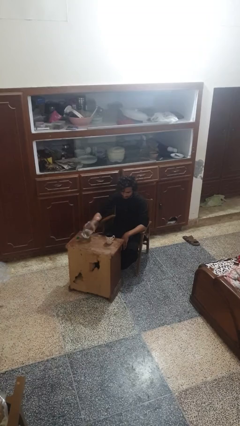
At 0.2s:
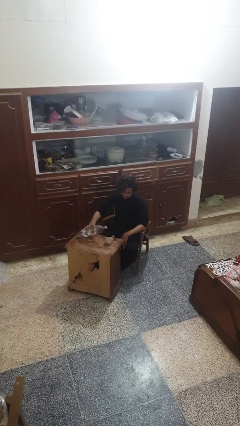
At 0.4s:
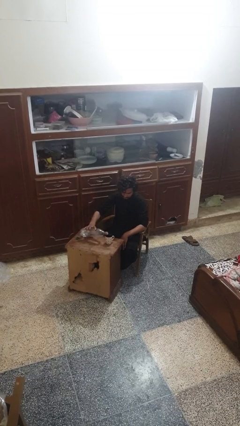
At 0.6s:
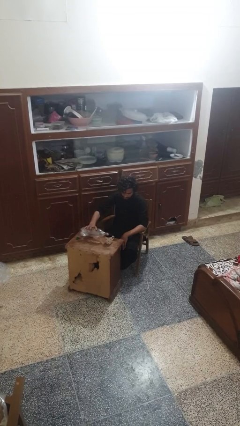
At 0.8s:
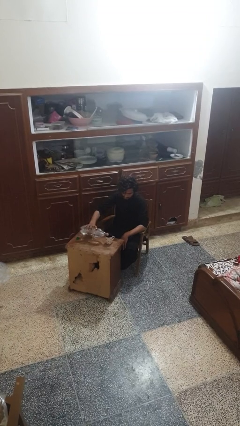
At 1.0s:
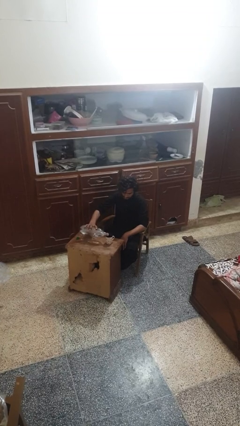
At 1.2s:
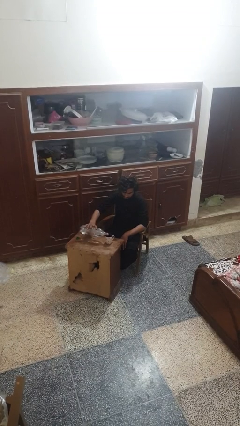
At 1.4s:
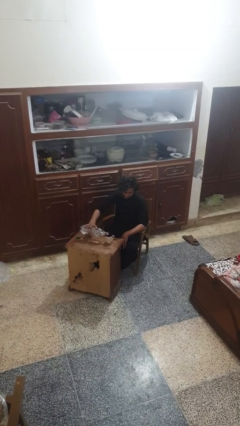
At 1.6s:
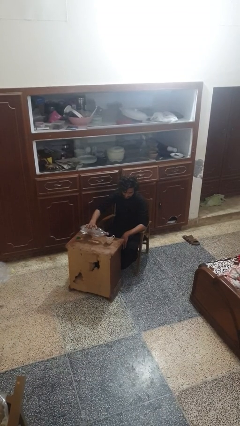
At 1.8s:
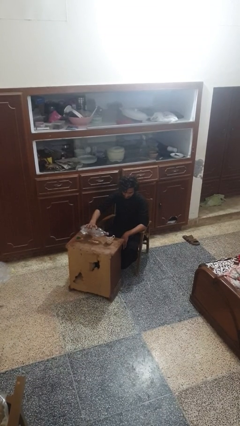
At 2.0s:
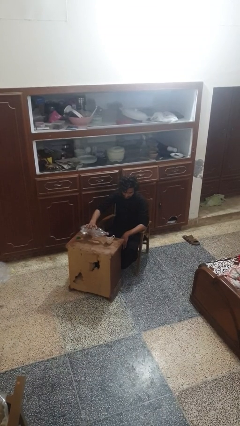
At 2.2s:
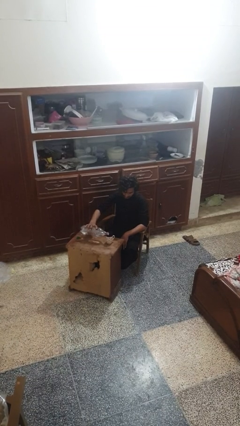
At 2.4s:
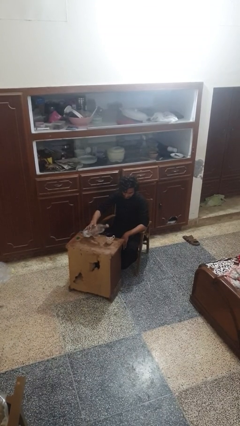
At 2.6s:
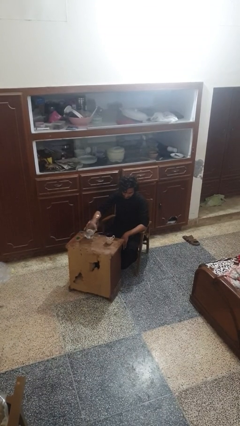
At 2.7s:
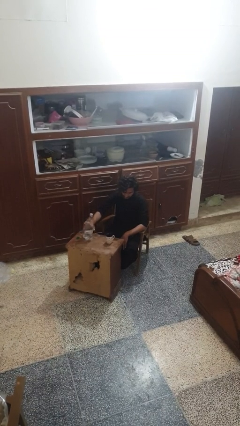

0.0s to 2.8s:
person pours liquid into cup

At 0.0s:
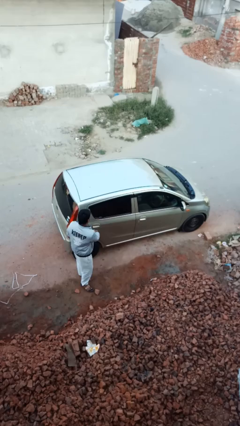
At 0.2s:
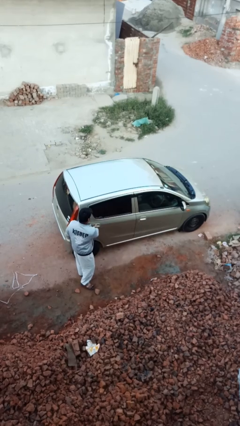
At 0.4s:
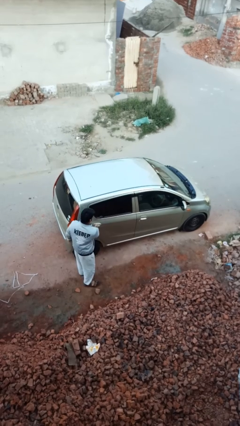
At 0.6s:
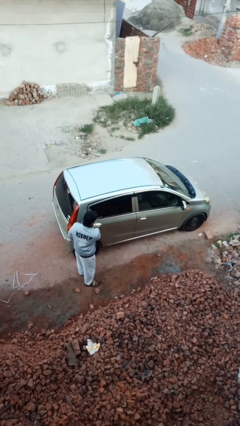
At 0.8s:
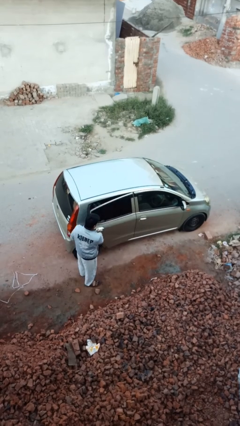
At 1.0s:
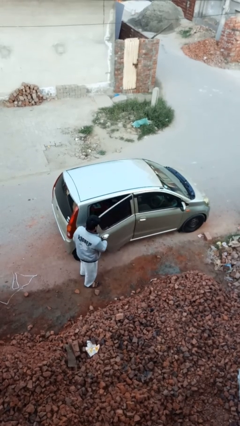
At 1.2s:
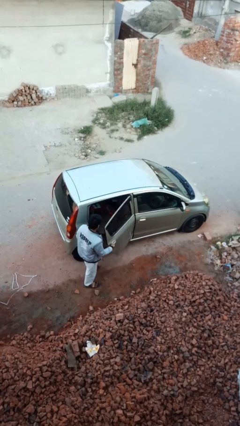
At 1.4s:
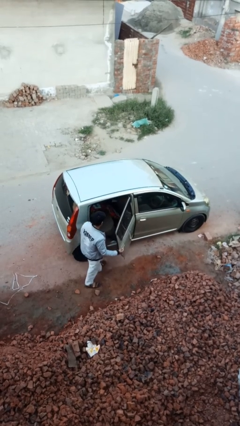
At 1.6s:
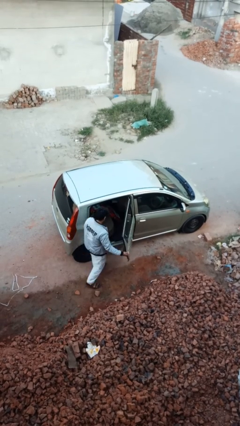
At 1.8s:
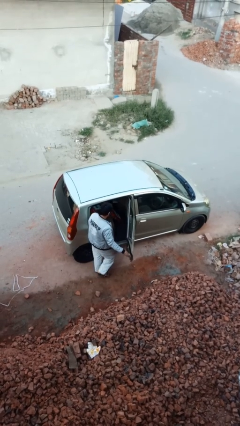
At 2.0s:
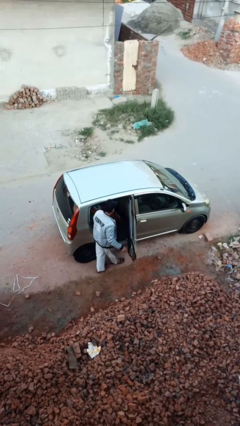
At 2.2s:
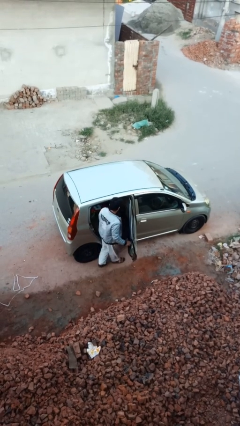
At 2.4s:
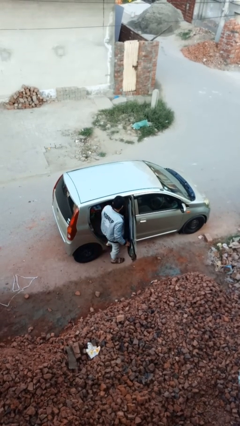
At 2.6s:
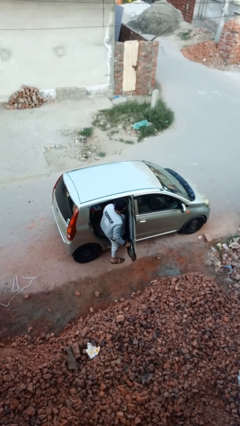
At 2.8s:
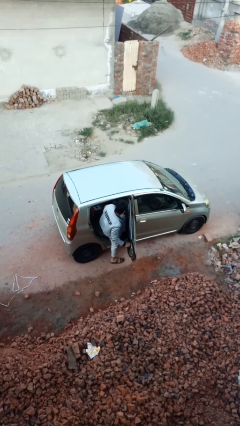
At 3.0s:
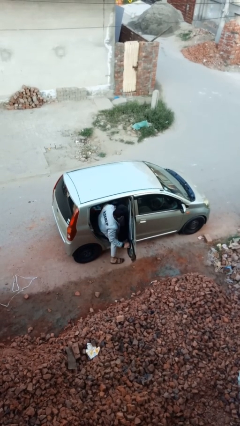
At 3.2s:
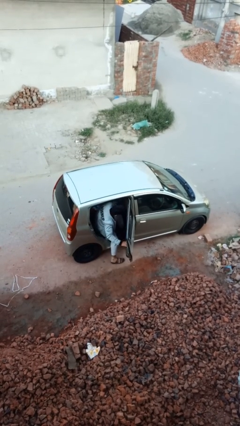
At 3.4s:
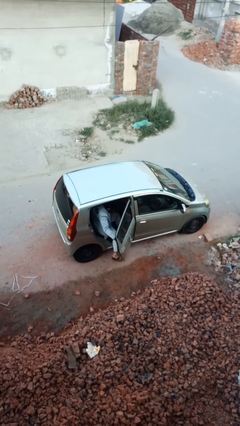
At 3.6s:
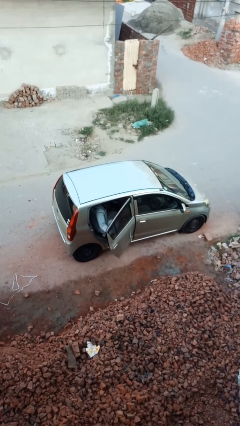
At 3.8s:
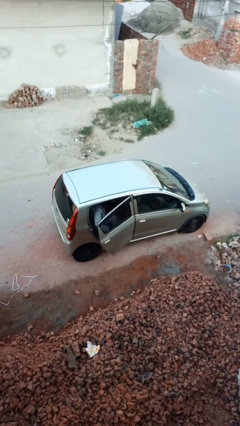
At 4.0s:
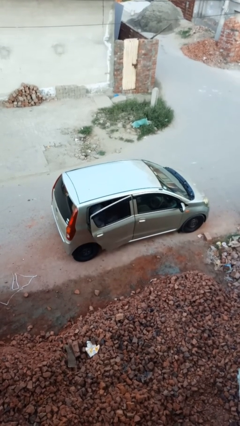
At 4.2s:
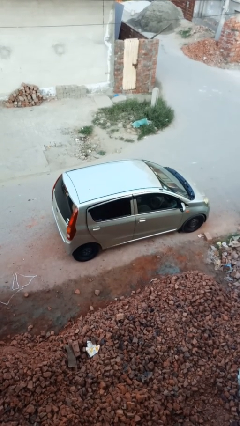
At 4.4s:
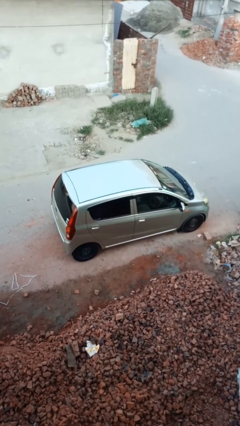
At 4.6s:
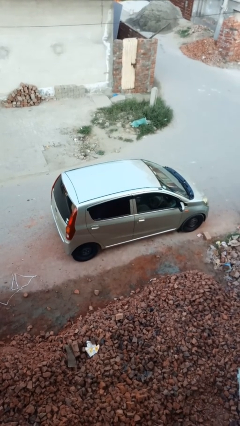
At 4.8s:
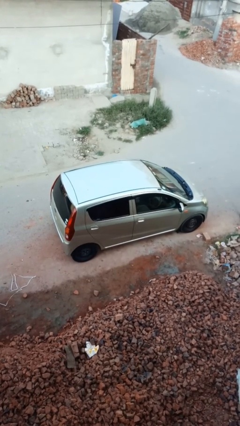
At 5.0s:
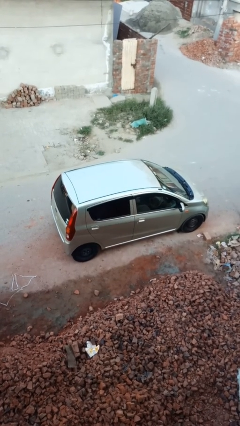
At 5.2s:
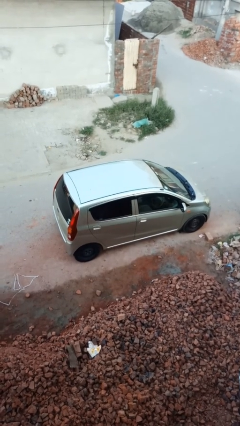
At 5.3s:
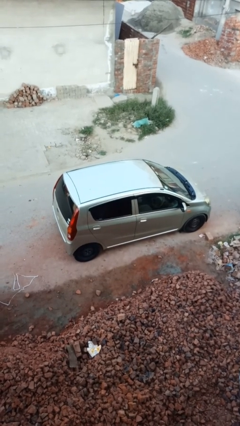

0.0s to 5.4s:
car picks up person

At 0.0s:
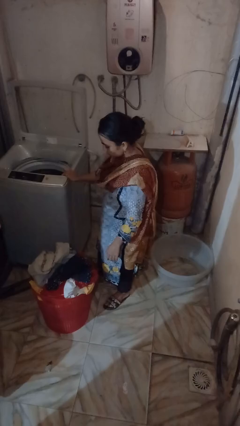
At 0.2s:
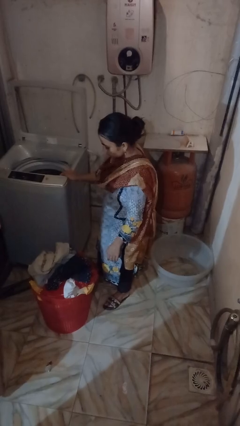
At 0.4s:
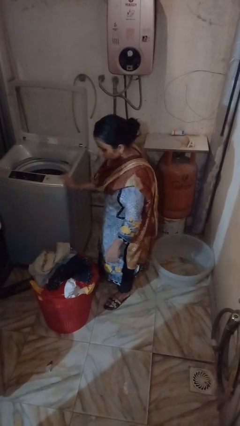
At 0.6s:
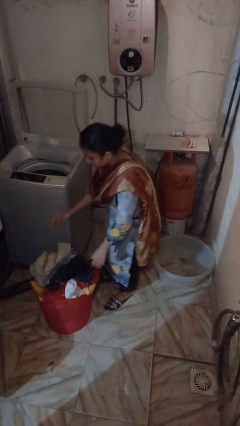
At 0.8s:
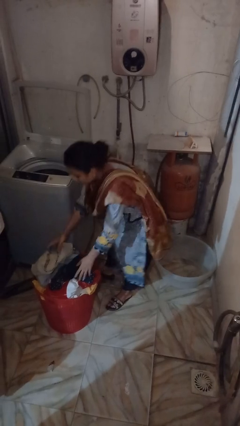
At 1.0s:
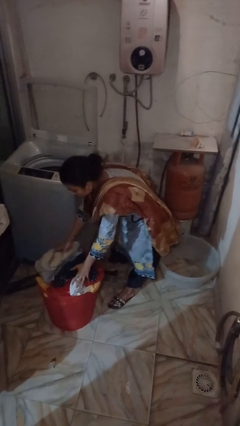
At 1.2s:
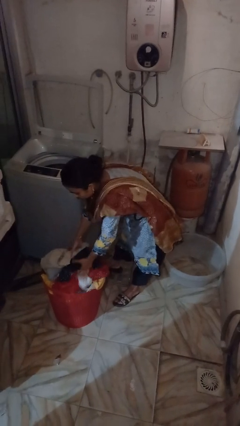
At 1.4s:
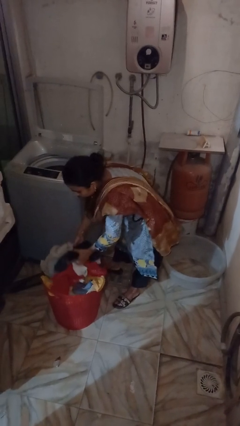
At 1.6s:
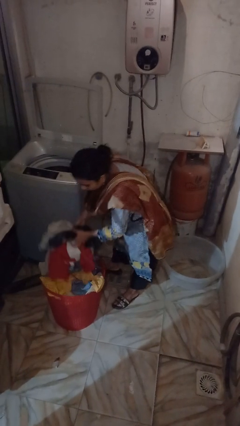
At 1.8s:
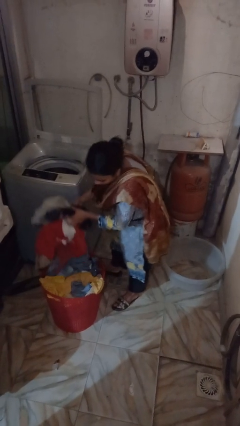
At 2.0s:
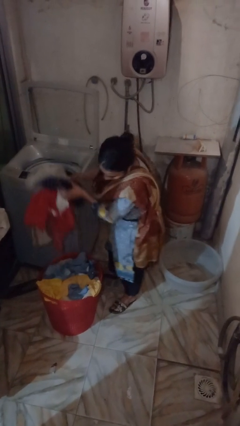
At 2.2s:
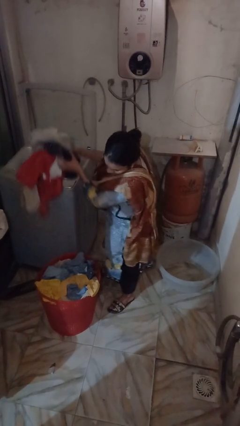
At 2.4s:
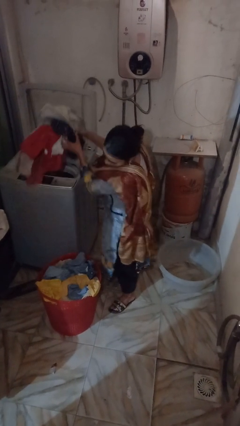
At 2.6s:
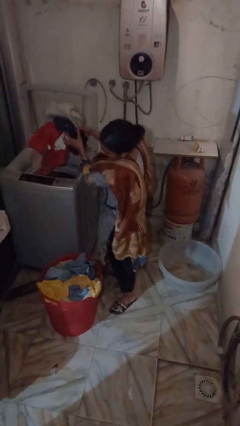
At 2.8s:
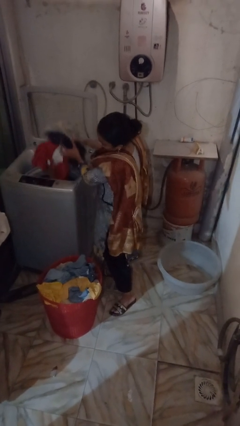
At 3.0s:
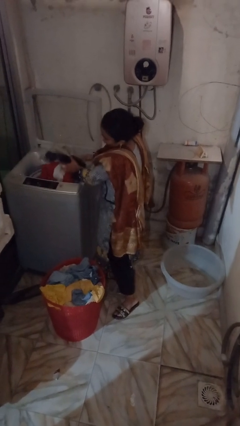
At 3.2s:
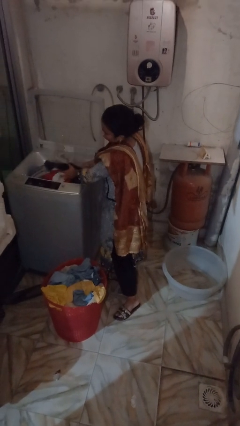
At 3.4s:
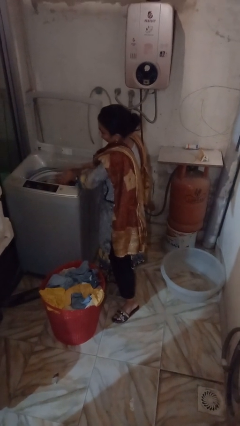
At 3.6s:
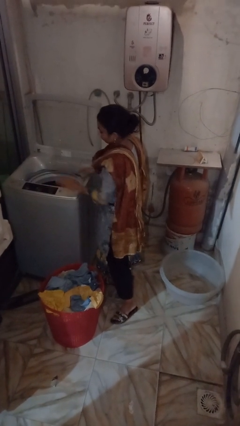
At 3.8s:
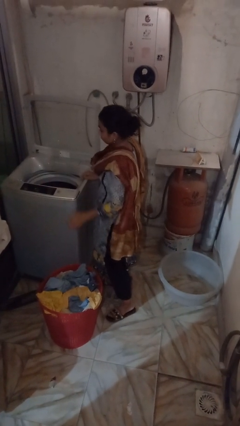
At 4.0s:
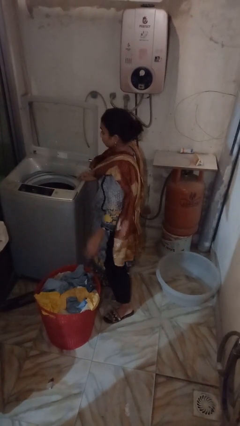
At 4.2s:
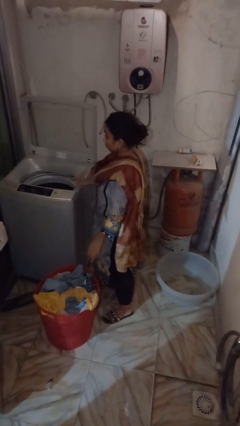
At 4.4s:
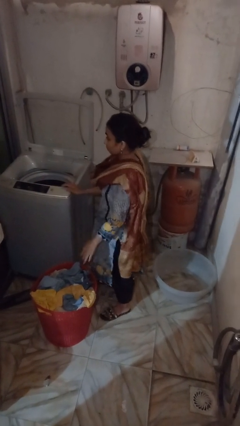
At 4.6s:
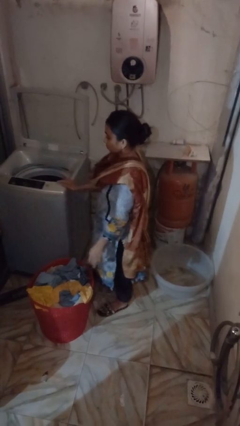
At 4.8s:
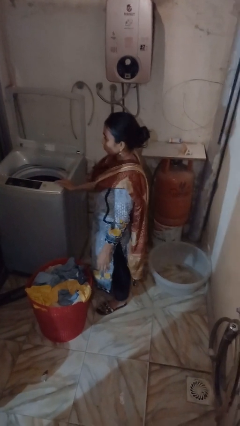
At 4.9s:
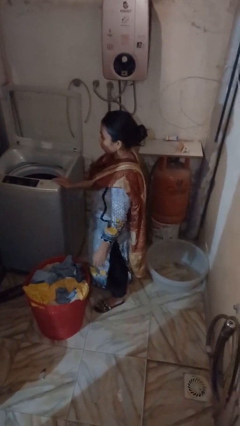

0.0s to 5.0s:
person loads dryer

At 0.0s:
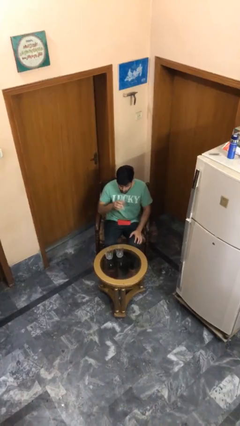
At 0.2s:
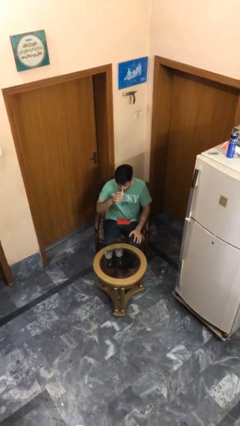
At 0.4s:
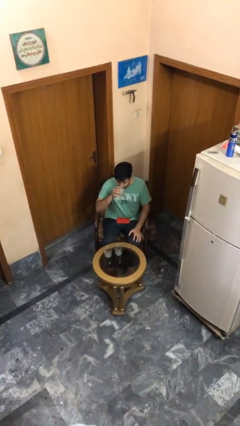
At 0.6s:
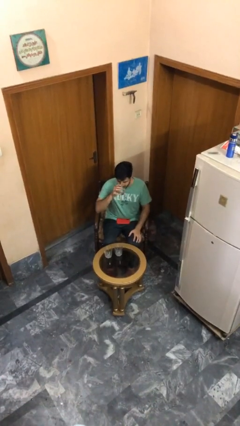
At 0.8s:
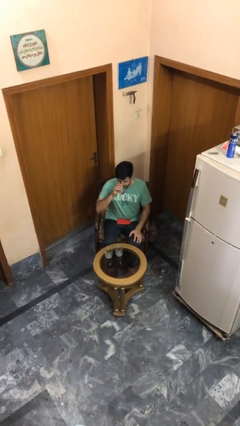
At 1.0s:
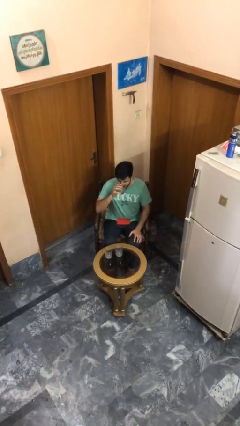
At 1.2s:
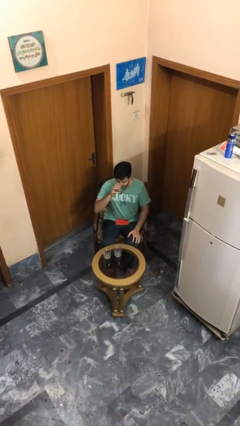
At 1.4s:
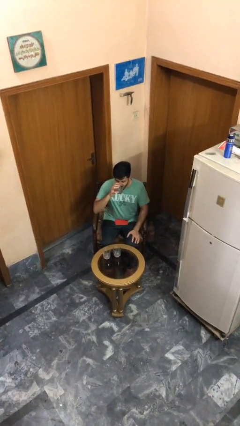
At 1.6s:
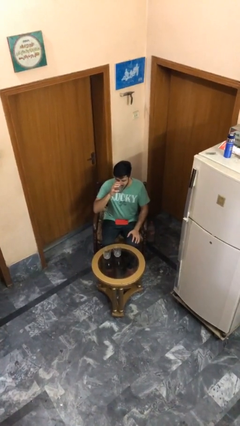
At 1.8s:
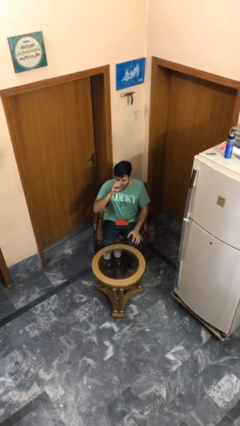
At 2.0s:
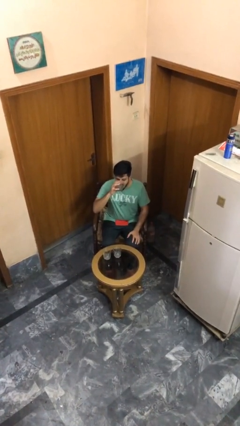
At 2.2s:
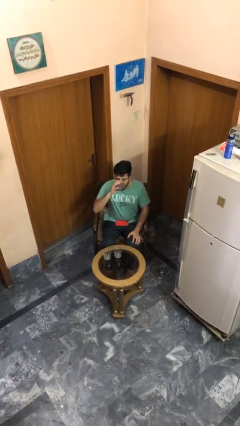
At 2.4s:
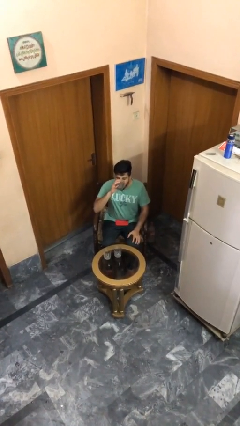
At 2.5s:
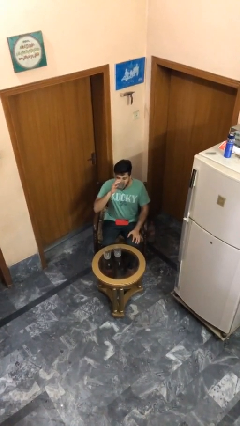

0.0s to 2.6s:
person drinks from shotglass

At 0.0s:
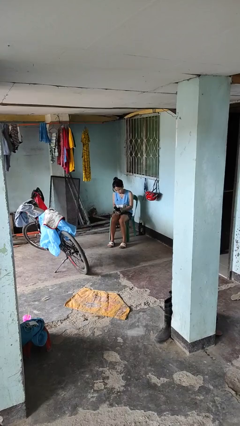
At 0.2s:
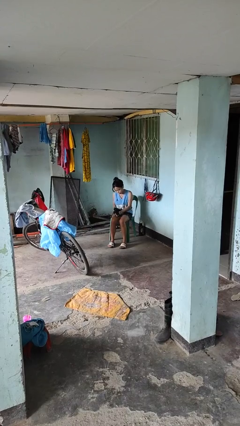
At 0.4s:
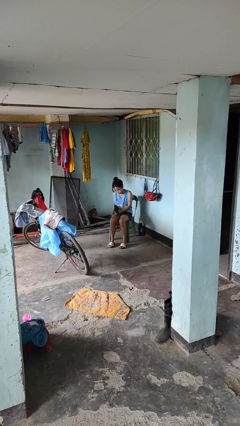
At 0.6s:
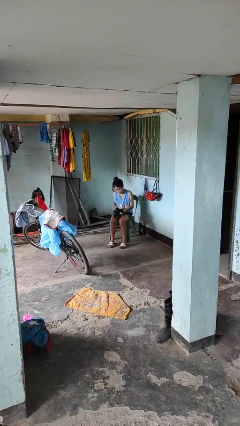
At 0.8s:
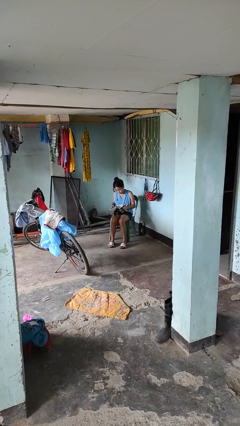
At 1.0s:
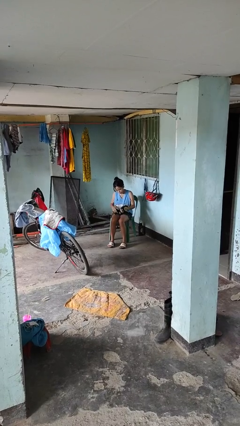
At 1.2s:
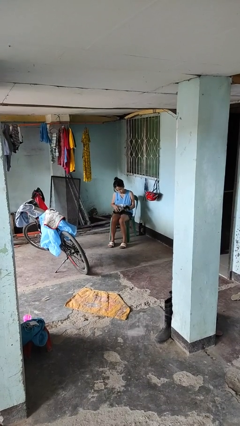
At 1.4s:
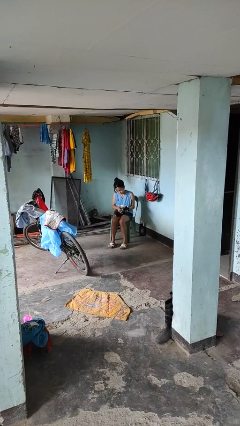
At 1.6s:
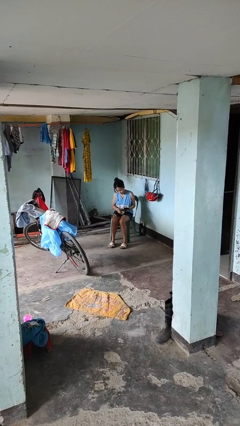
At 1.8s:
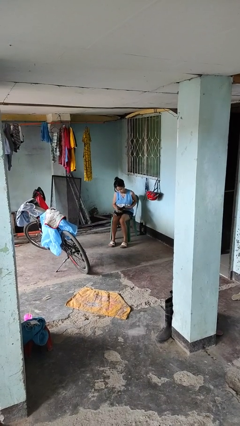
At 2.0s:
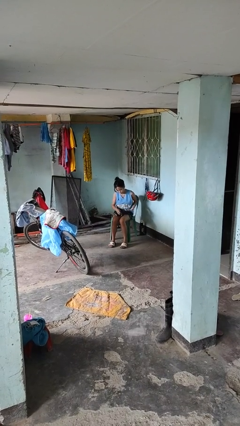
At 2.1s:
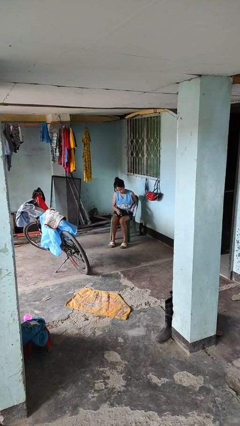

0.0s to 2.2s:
person takes off gloves

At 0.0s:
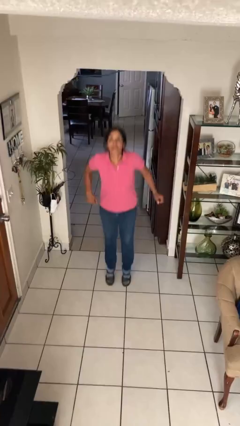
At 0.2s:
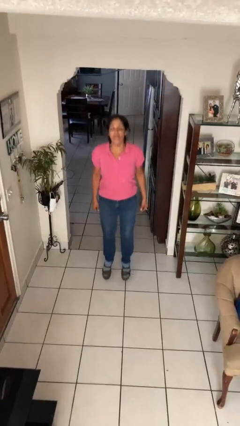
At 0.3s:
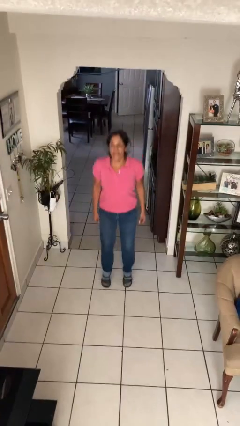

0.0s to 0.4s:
person jumps
